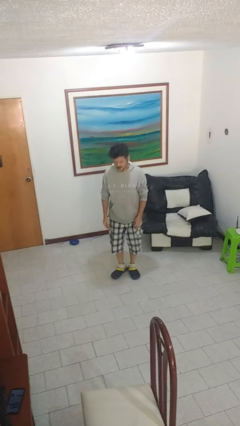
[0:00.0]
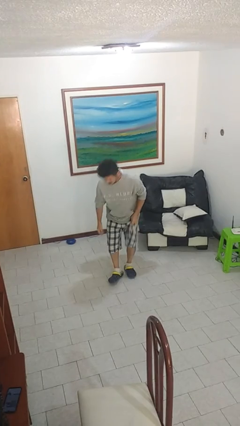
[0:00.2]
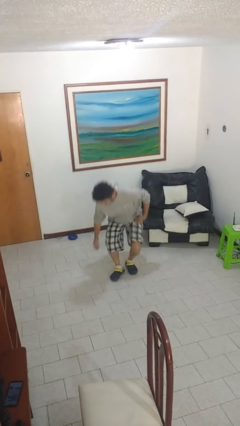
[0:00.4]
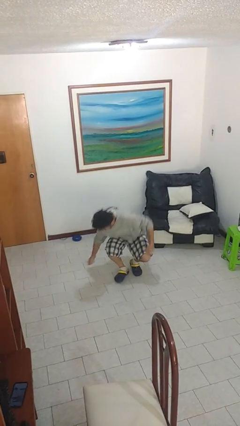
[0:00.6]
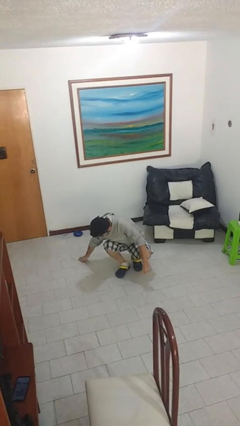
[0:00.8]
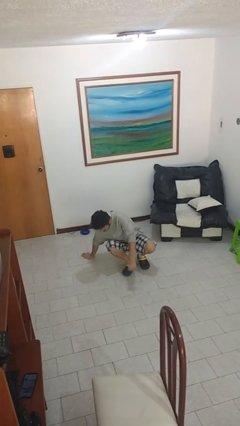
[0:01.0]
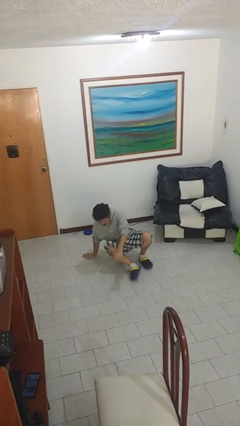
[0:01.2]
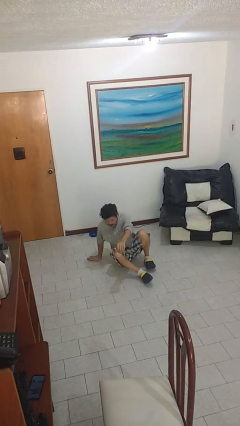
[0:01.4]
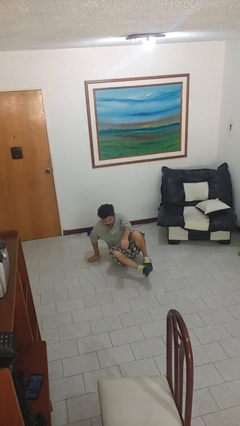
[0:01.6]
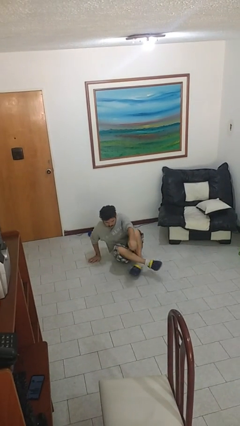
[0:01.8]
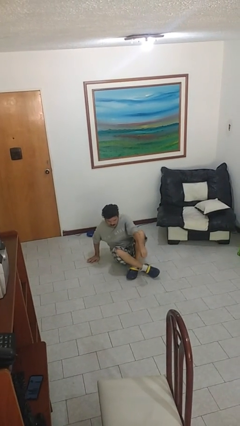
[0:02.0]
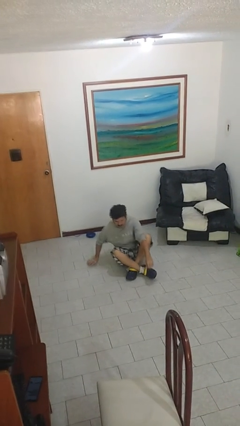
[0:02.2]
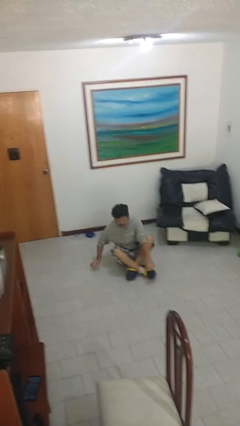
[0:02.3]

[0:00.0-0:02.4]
person sits crisscross

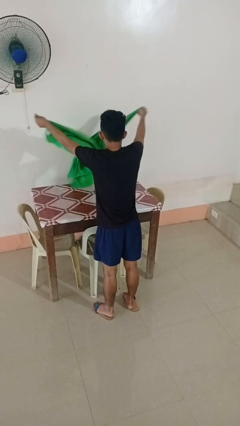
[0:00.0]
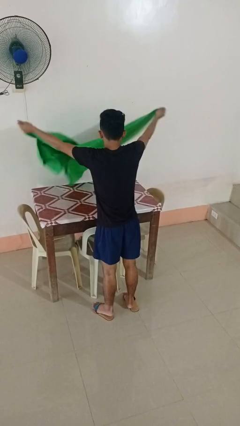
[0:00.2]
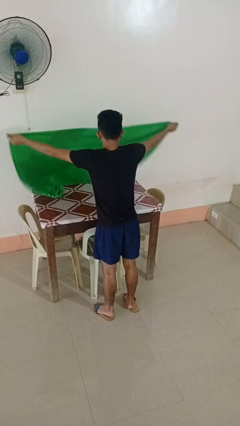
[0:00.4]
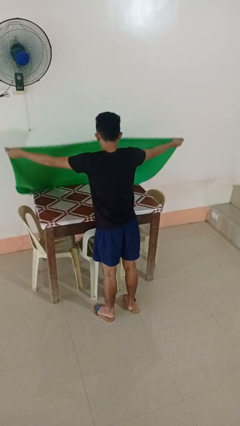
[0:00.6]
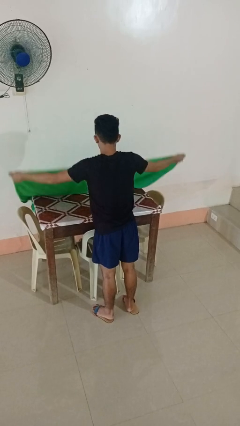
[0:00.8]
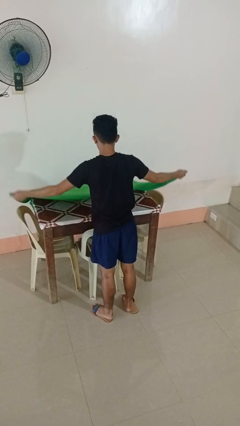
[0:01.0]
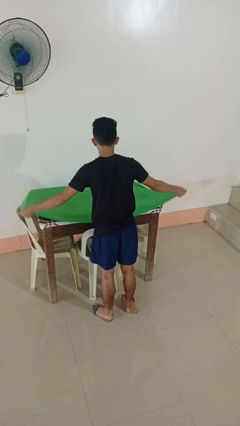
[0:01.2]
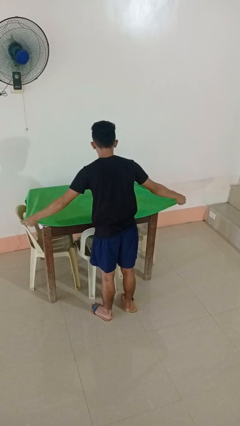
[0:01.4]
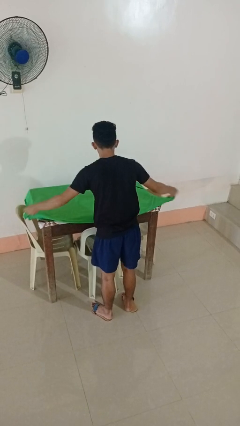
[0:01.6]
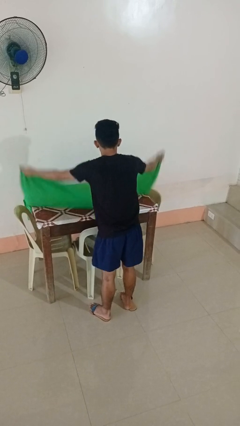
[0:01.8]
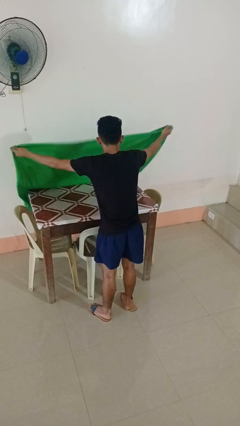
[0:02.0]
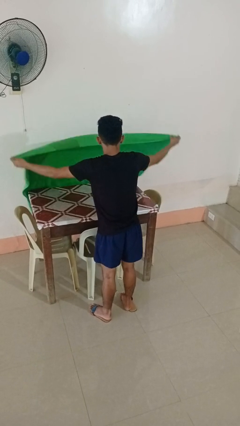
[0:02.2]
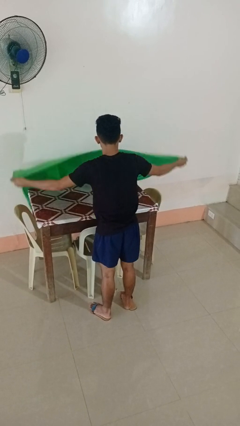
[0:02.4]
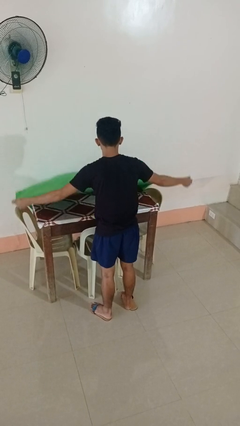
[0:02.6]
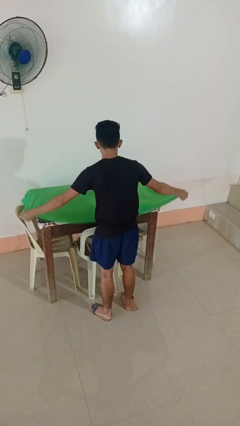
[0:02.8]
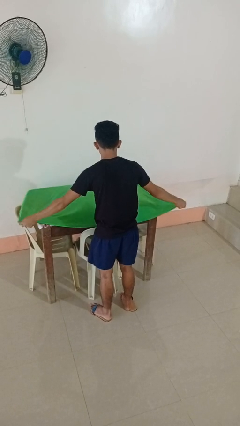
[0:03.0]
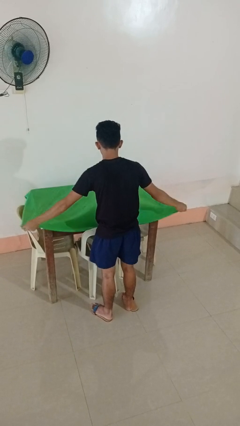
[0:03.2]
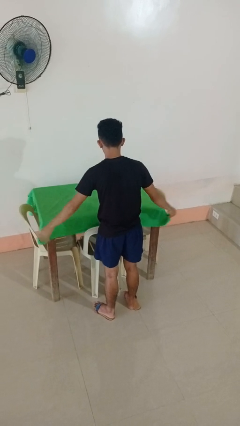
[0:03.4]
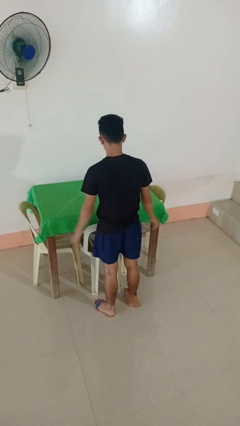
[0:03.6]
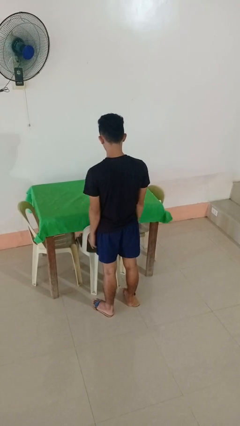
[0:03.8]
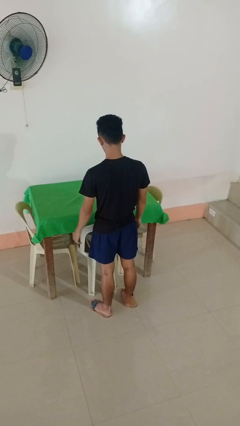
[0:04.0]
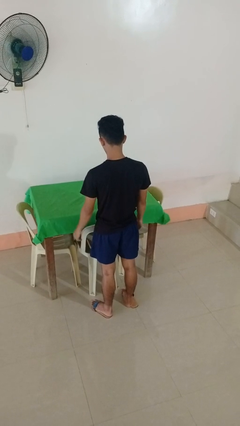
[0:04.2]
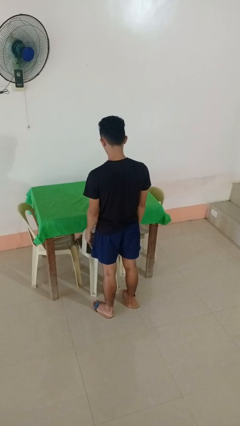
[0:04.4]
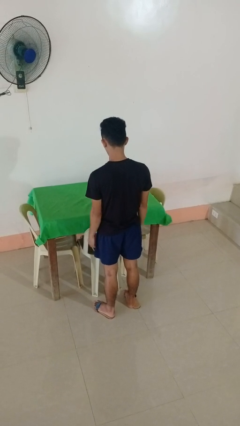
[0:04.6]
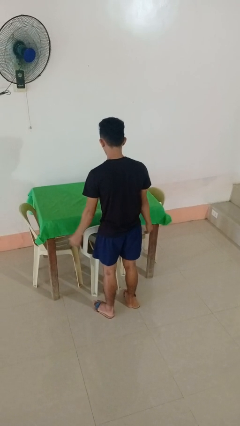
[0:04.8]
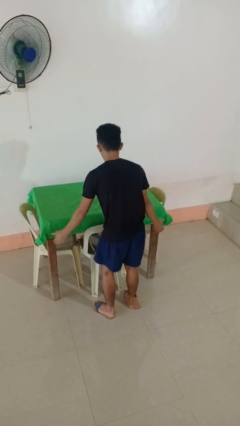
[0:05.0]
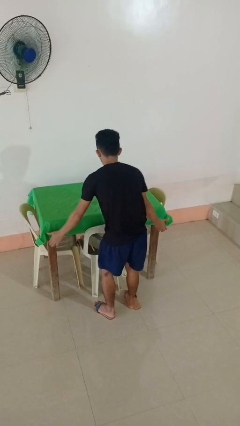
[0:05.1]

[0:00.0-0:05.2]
person spreads tablecloth

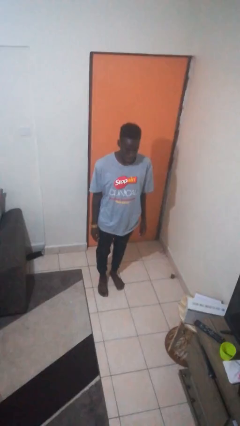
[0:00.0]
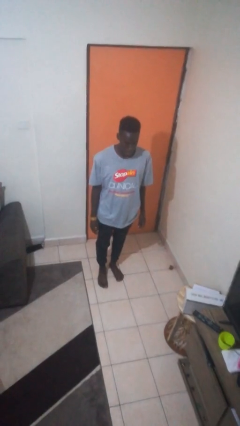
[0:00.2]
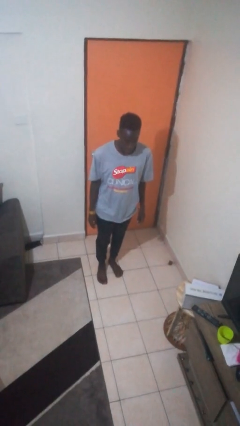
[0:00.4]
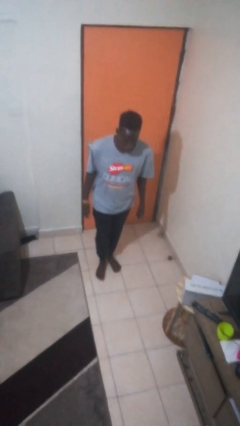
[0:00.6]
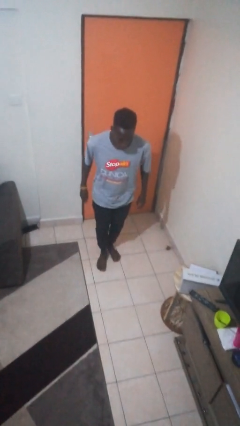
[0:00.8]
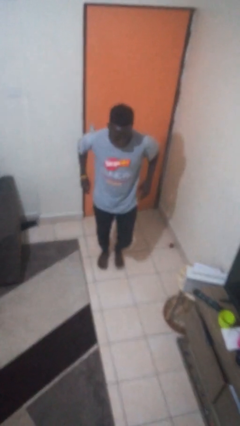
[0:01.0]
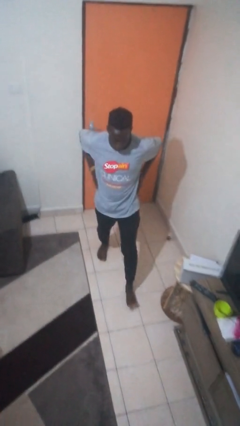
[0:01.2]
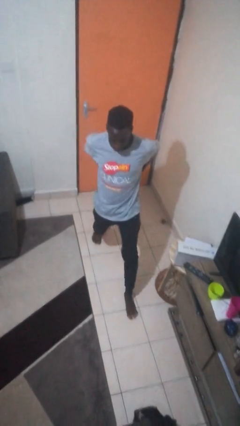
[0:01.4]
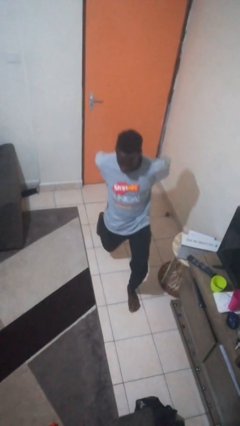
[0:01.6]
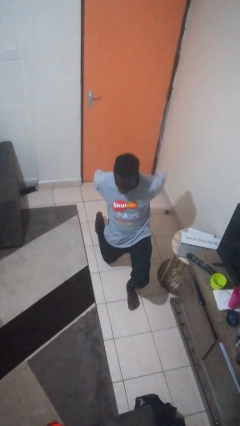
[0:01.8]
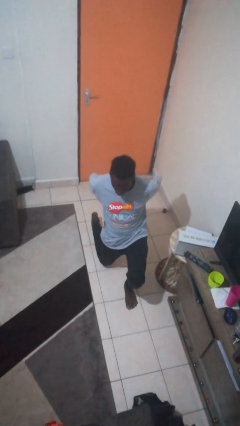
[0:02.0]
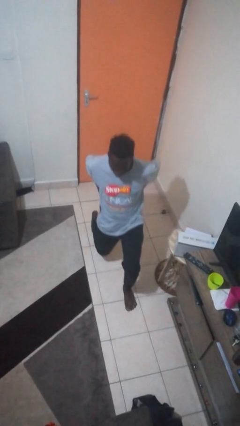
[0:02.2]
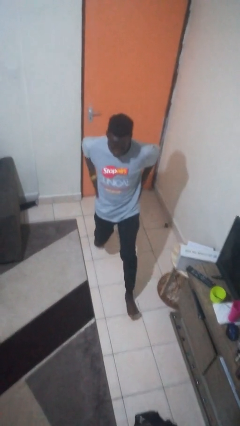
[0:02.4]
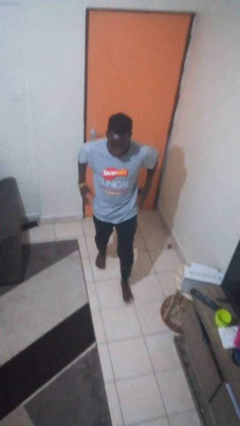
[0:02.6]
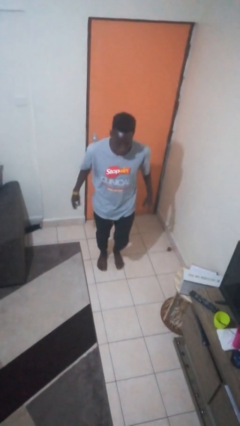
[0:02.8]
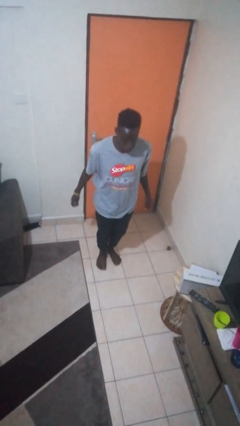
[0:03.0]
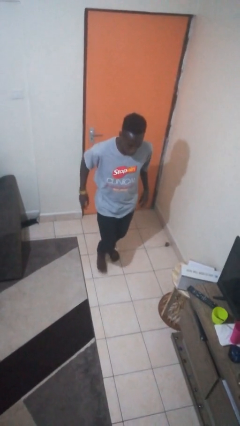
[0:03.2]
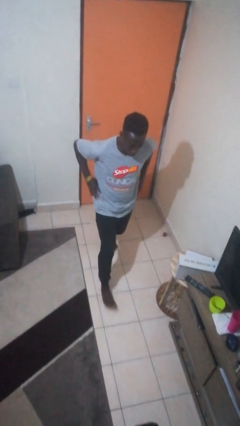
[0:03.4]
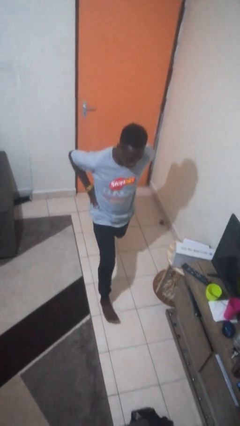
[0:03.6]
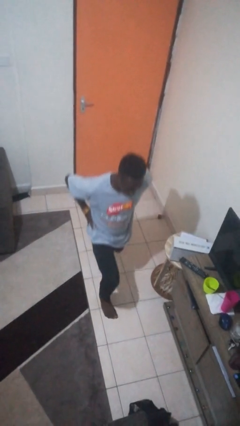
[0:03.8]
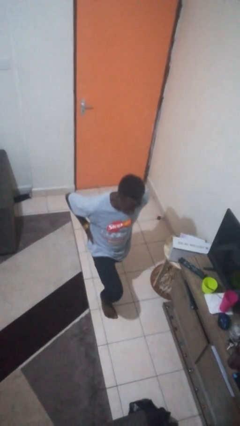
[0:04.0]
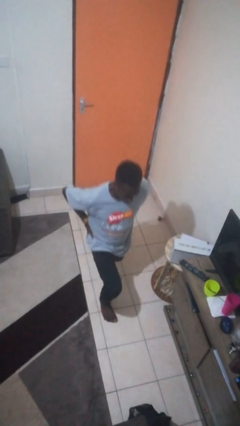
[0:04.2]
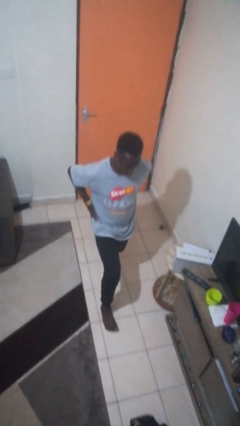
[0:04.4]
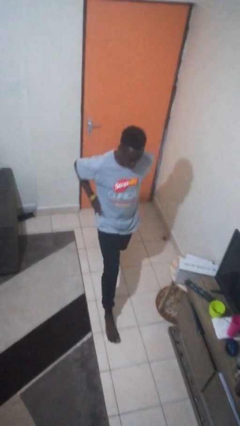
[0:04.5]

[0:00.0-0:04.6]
person exercises with lunges

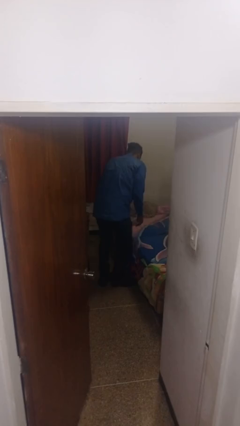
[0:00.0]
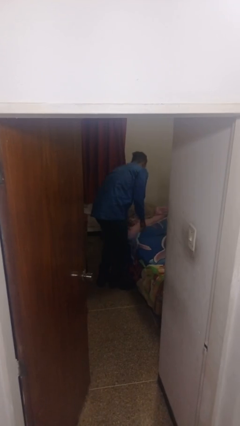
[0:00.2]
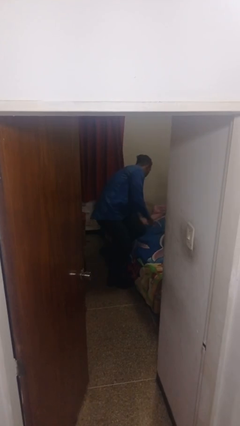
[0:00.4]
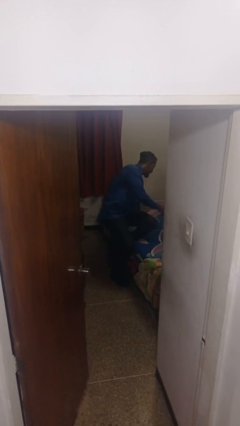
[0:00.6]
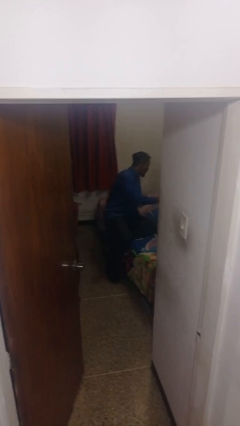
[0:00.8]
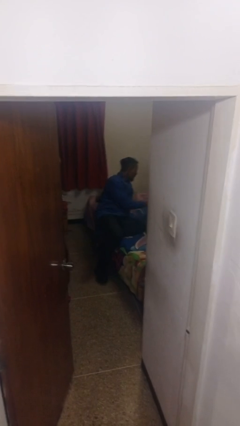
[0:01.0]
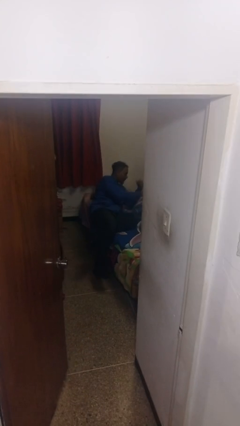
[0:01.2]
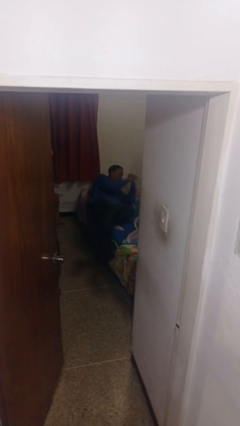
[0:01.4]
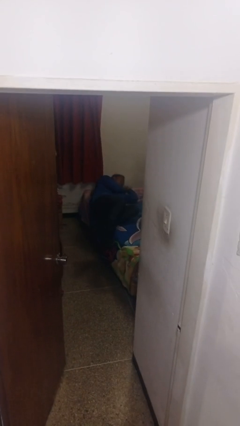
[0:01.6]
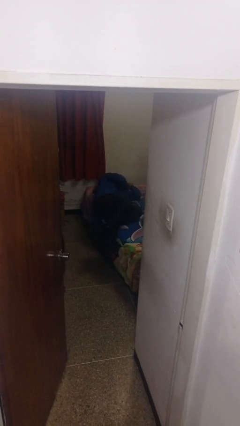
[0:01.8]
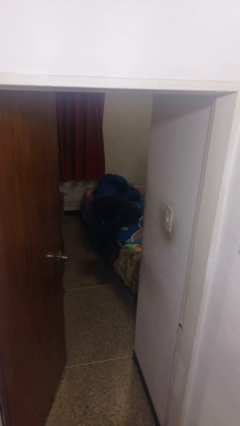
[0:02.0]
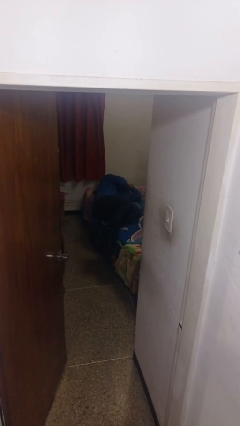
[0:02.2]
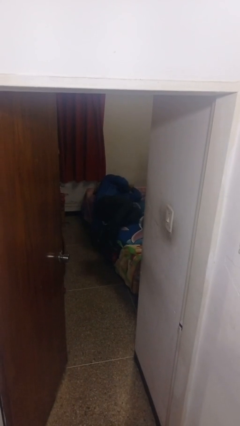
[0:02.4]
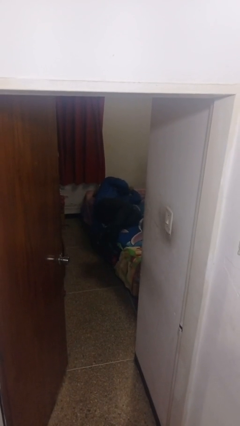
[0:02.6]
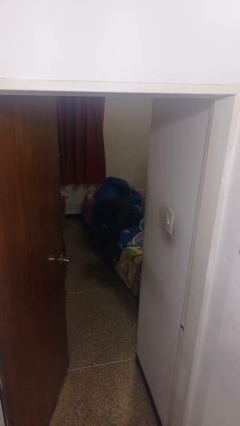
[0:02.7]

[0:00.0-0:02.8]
person lies down on bed

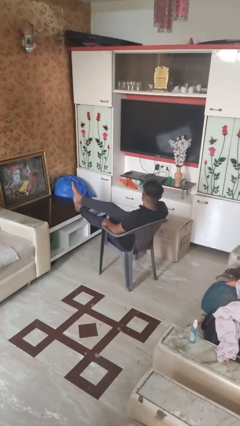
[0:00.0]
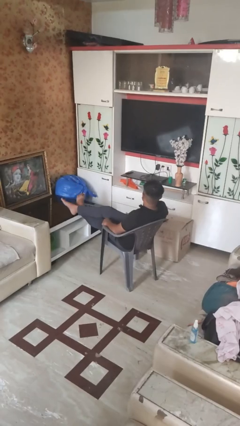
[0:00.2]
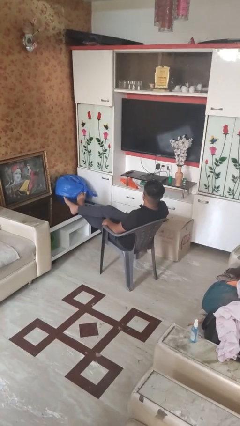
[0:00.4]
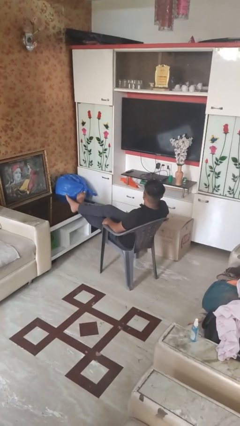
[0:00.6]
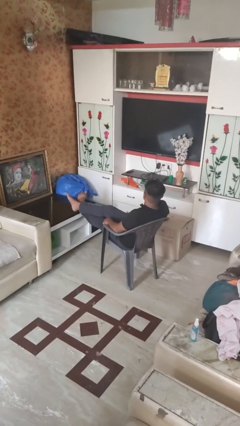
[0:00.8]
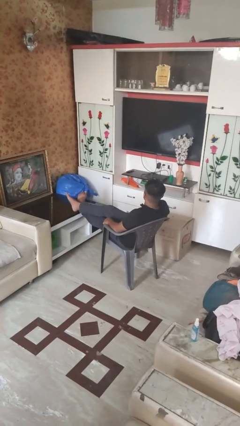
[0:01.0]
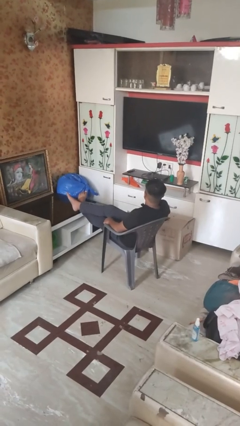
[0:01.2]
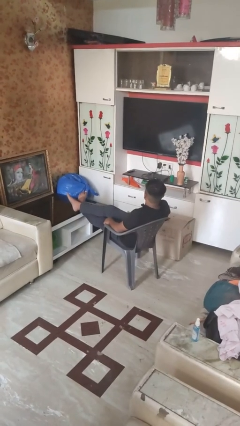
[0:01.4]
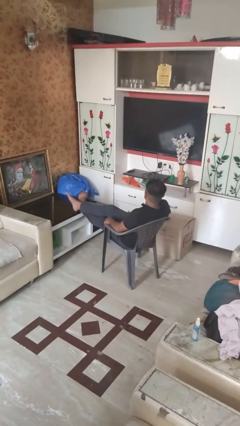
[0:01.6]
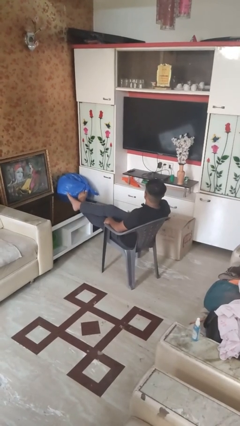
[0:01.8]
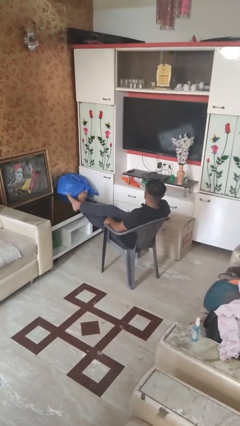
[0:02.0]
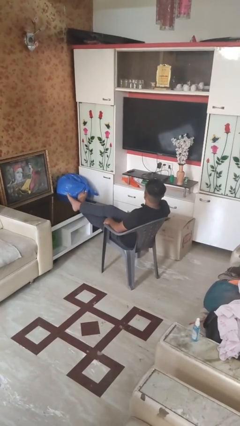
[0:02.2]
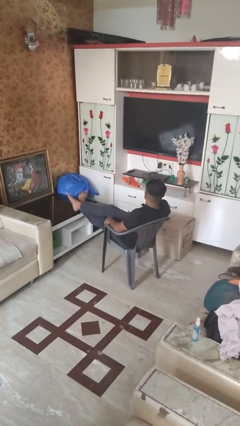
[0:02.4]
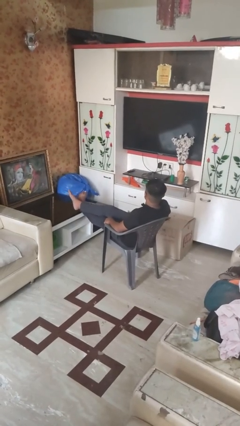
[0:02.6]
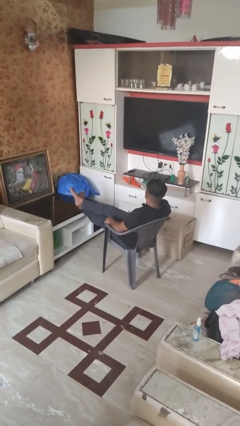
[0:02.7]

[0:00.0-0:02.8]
person crosses legs
